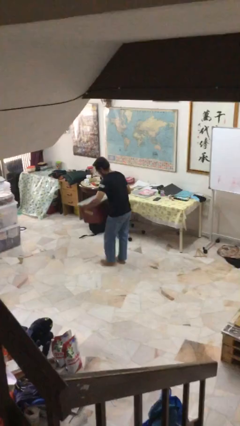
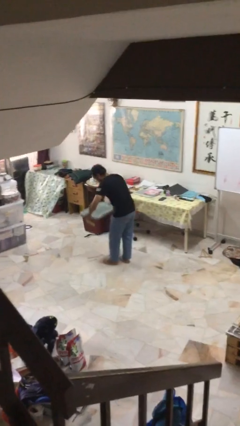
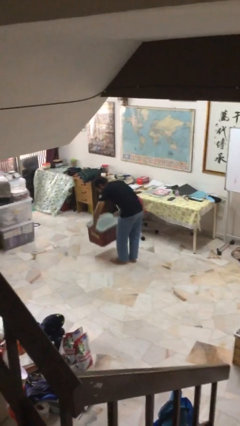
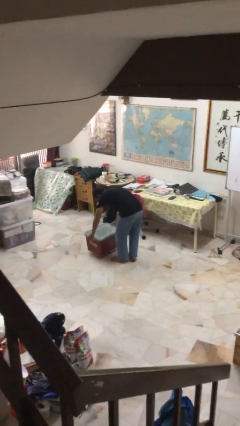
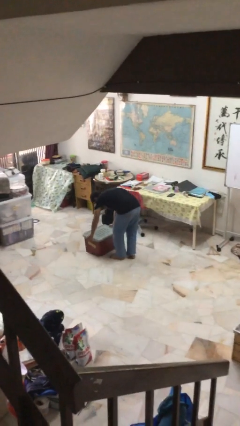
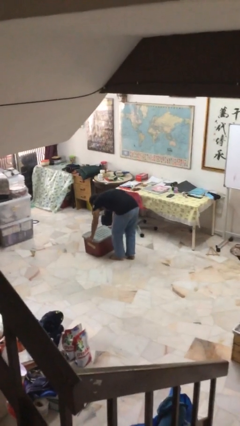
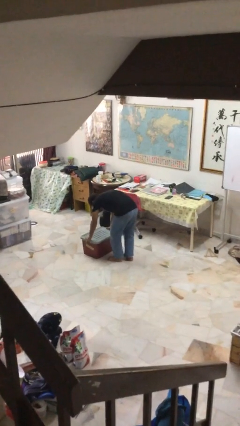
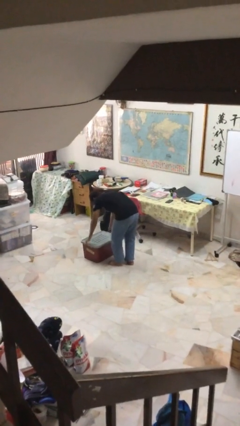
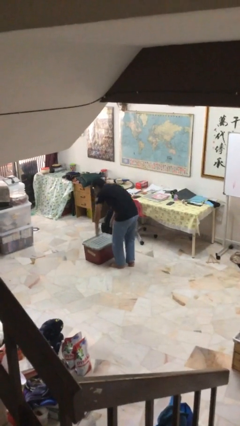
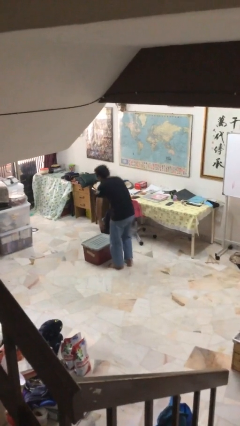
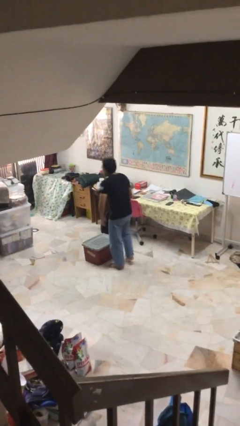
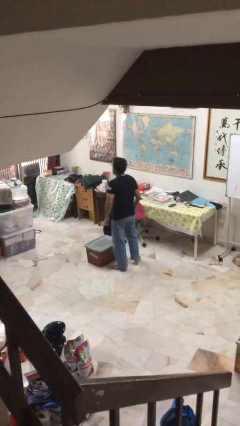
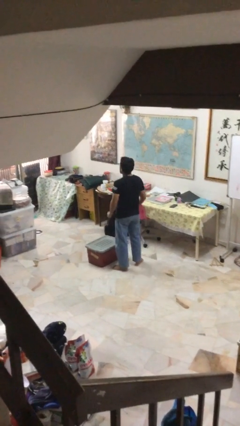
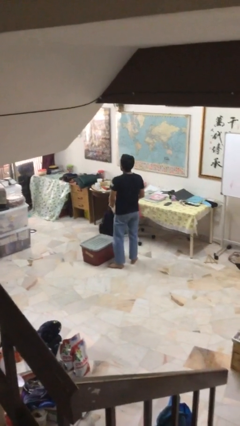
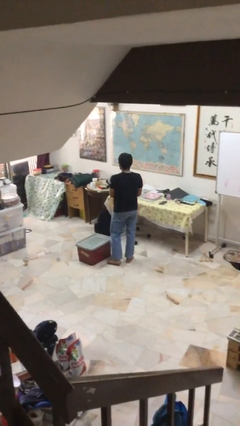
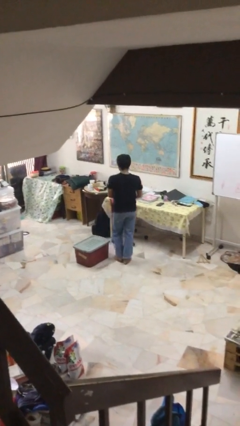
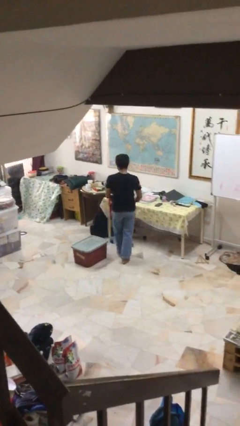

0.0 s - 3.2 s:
person puts down object on floor

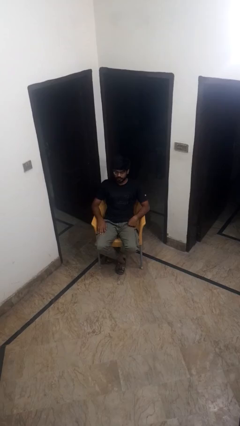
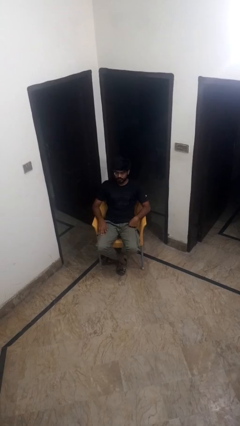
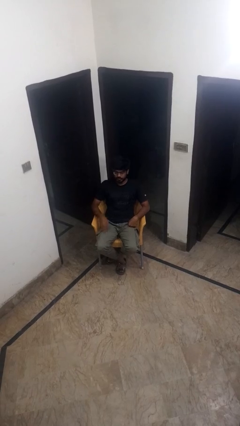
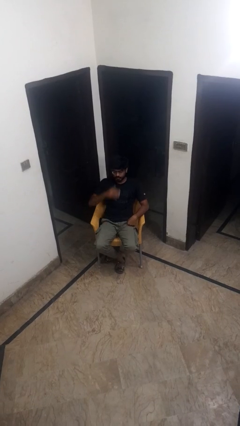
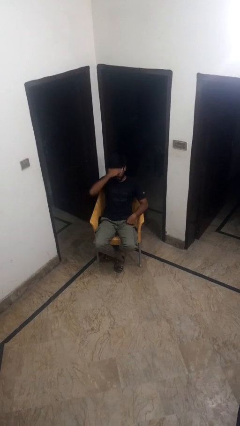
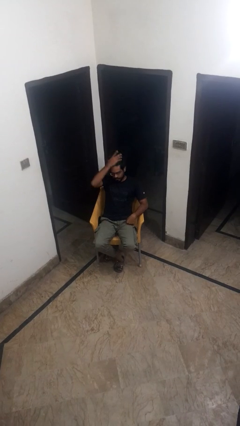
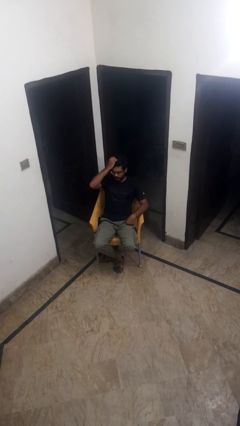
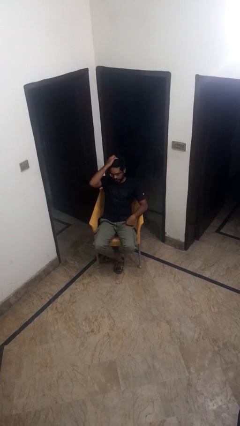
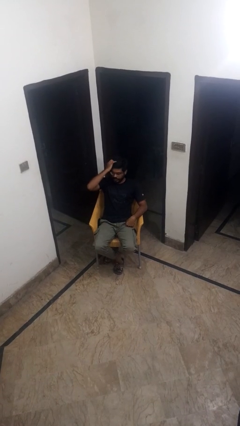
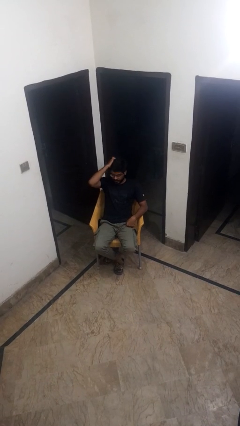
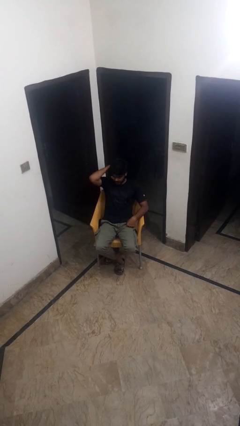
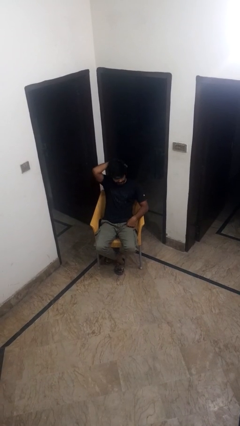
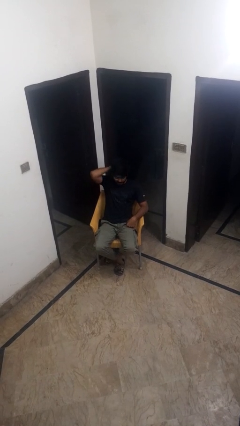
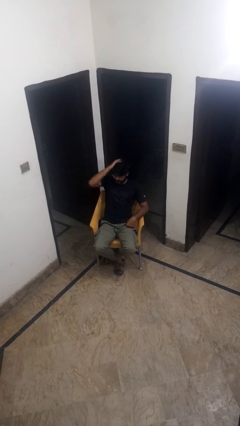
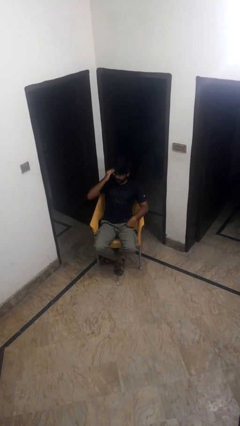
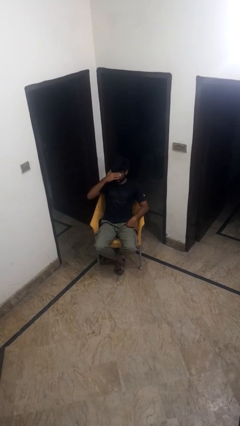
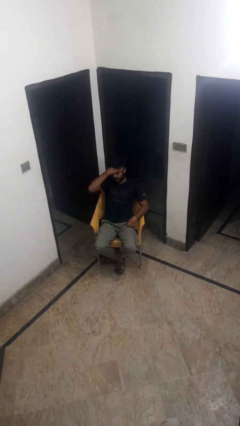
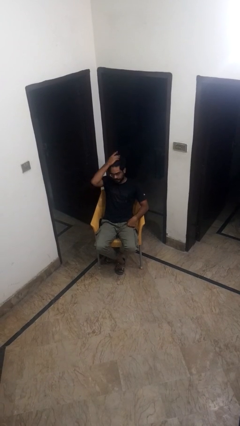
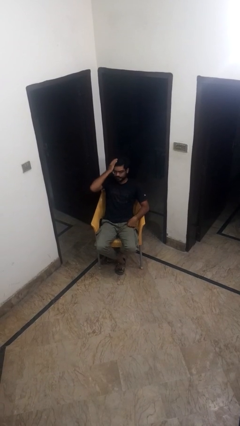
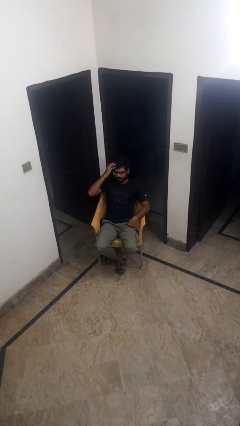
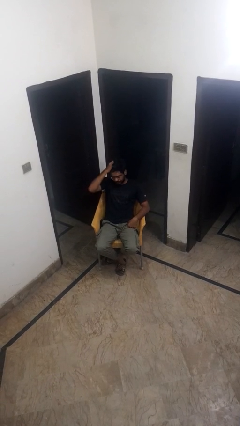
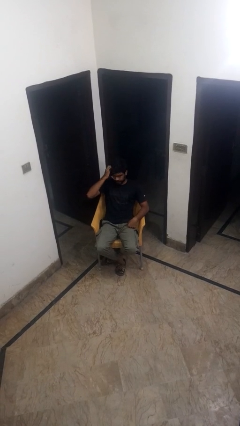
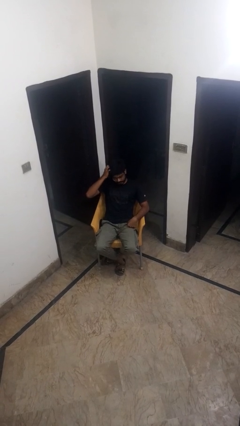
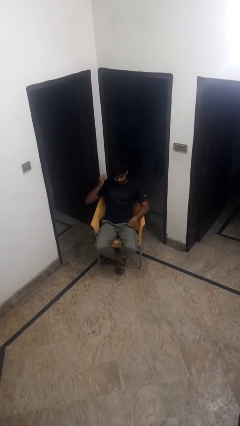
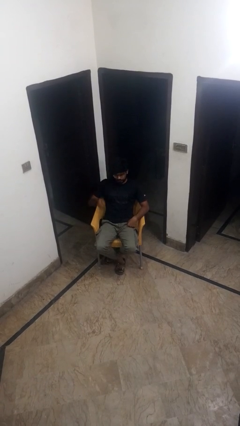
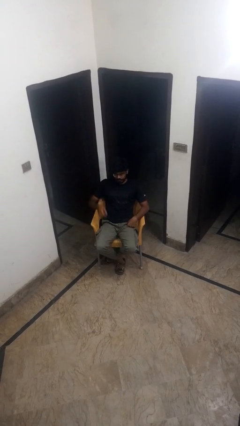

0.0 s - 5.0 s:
person scratches face

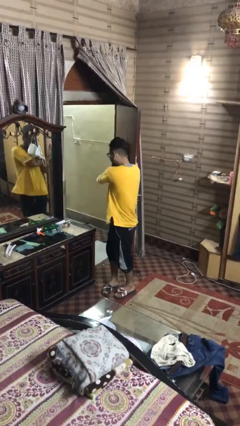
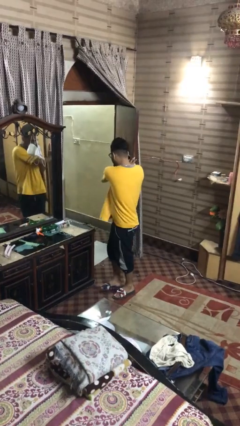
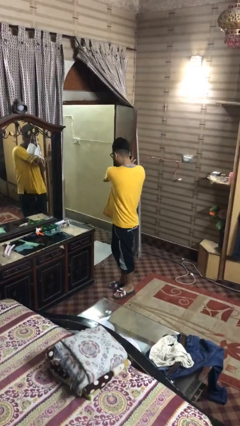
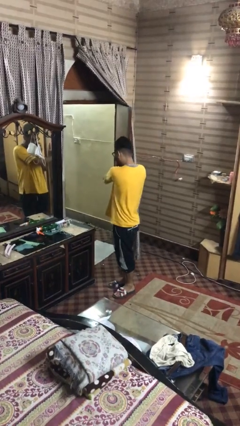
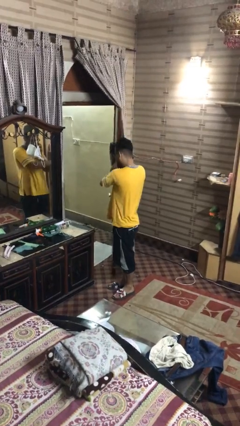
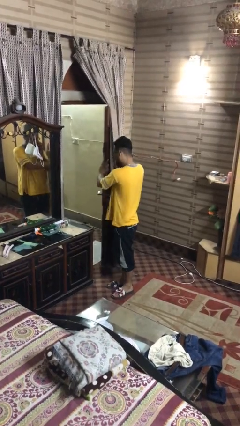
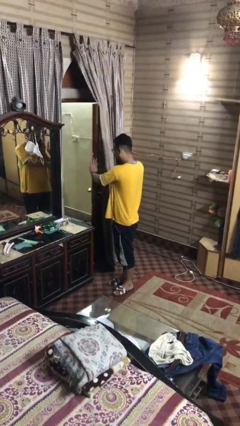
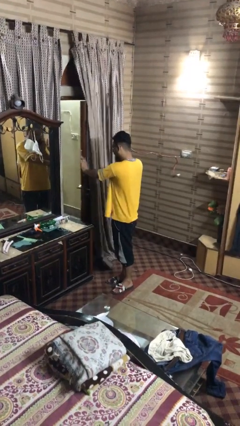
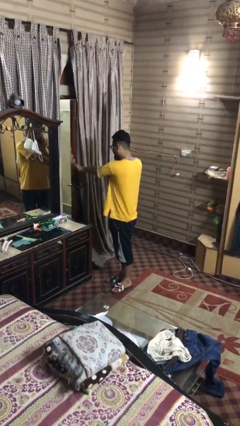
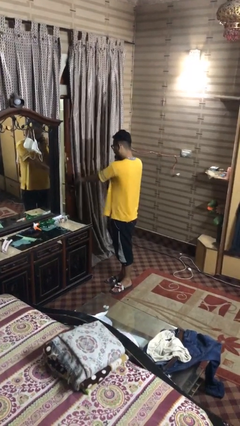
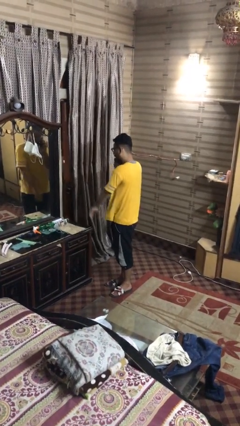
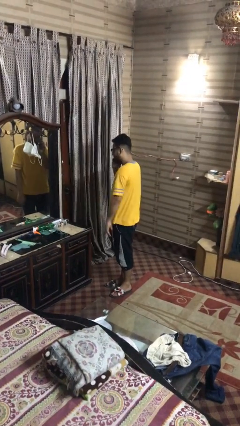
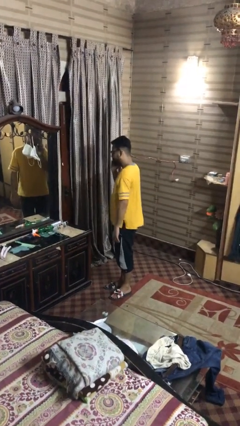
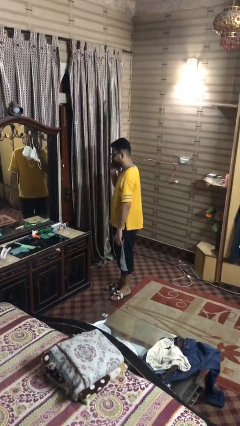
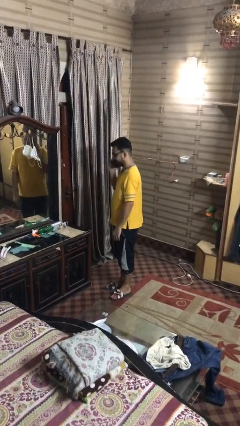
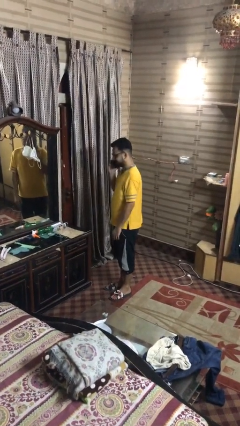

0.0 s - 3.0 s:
person closes facility door

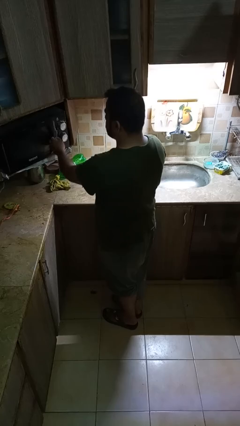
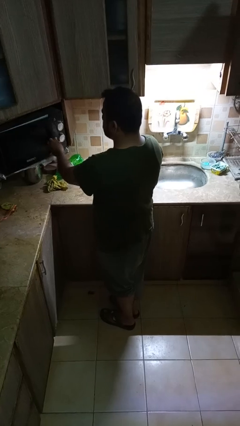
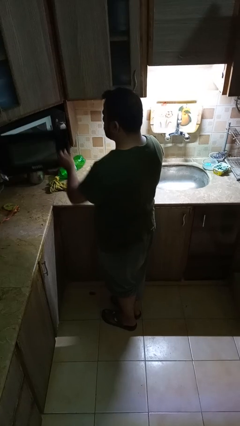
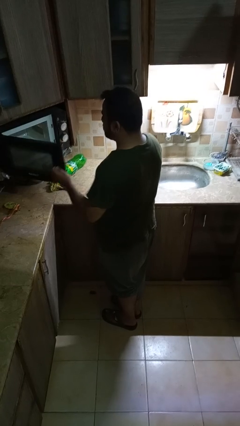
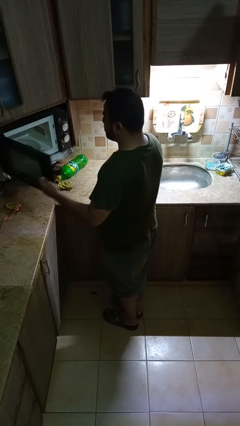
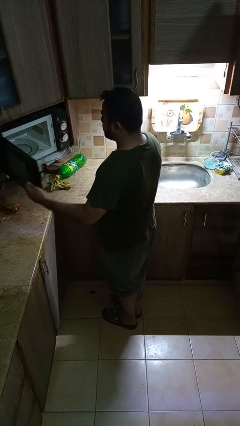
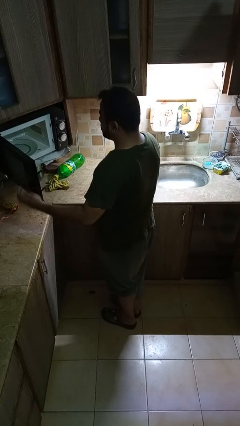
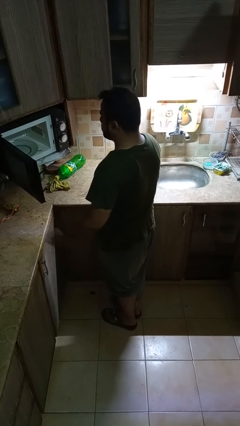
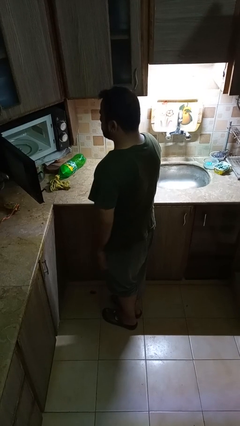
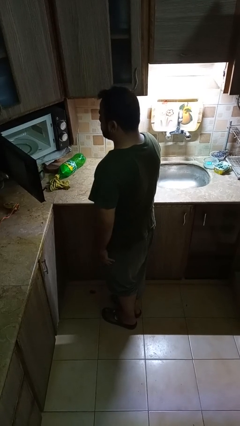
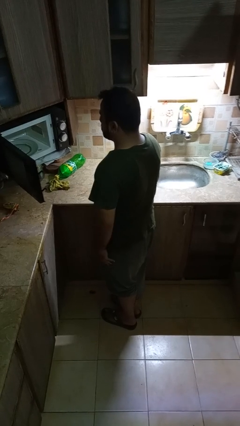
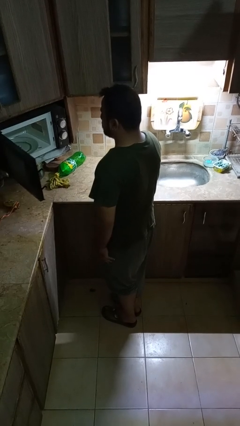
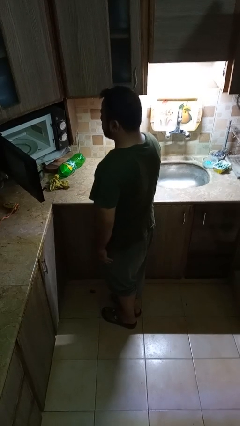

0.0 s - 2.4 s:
person opens oven door

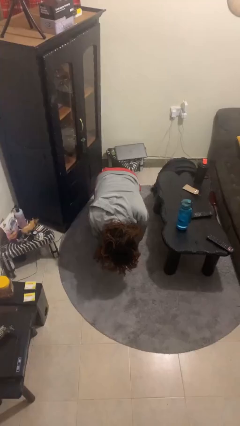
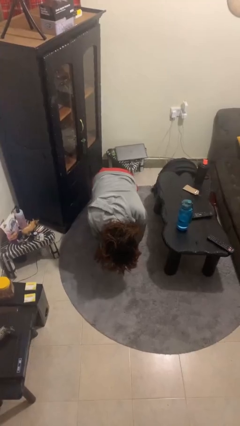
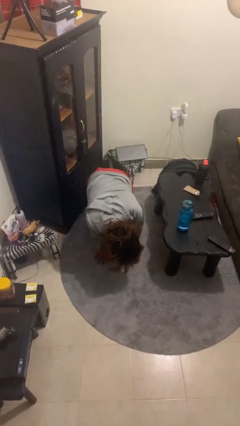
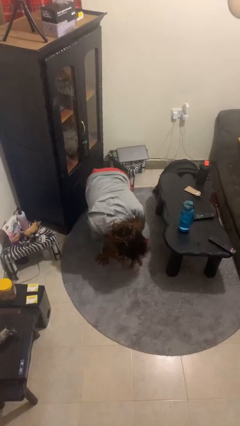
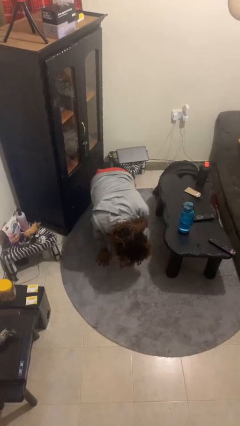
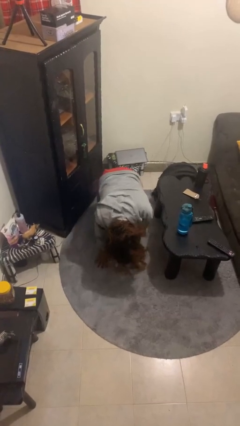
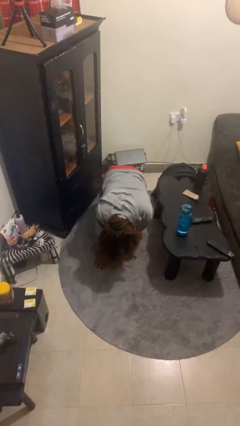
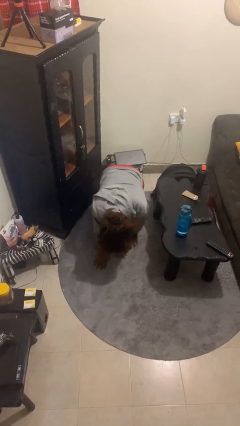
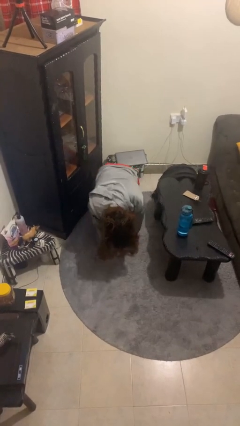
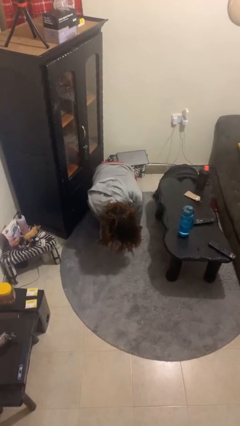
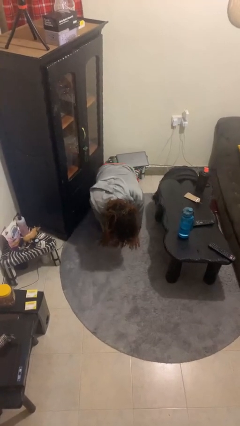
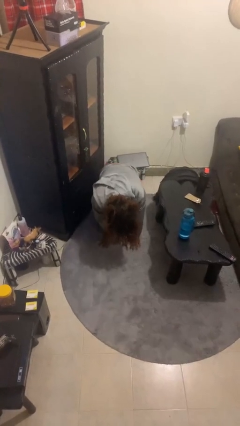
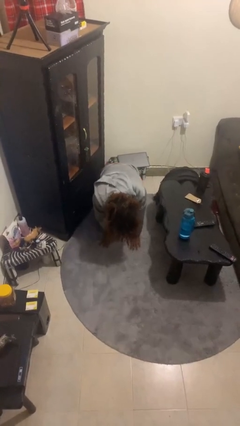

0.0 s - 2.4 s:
person crawls

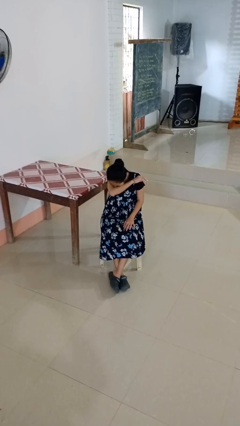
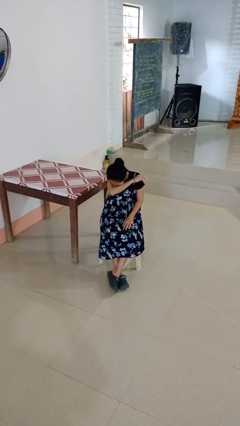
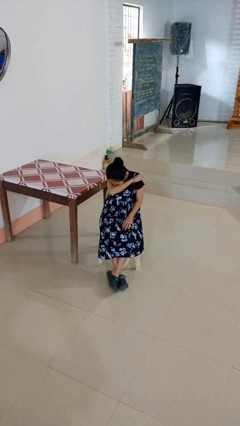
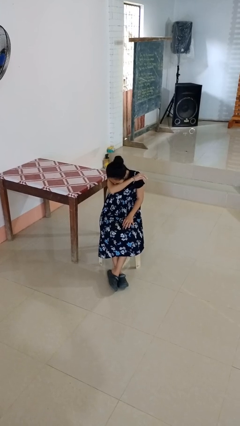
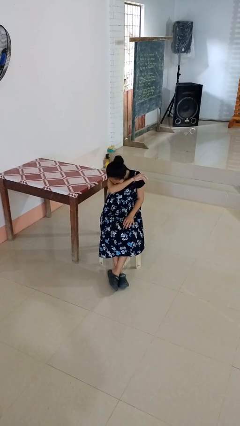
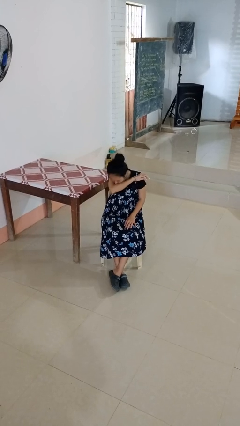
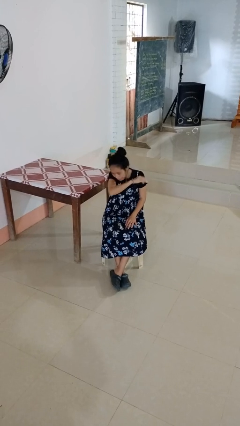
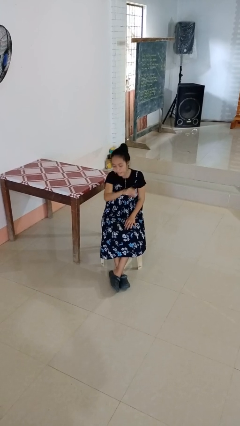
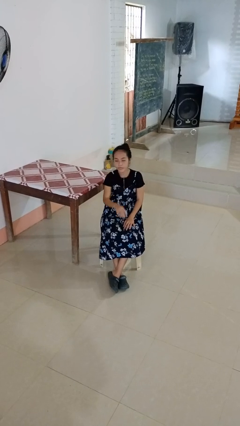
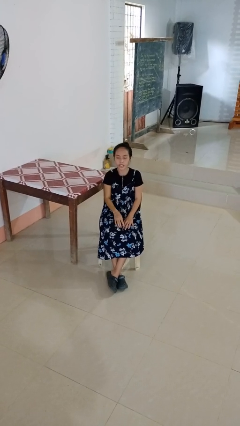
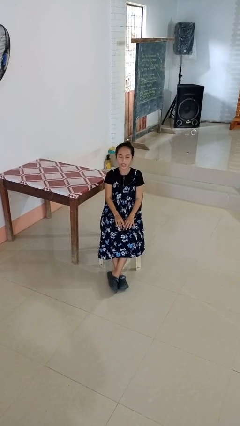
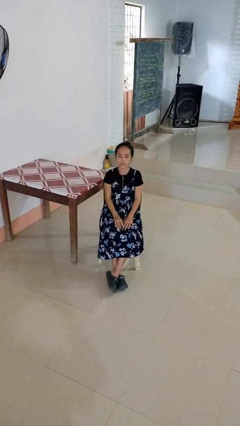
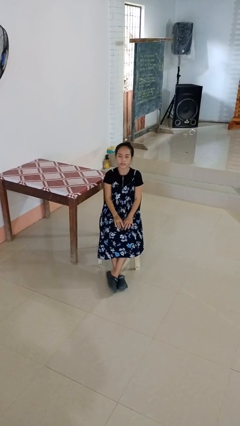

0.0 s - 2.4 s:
person sneezes into arm
